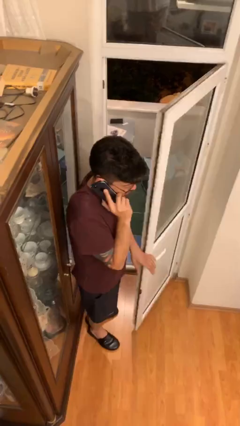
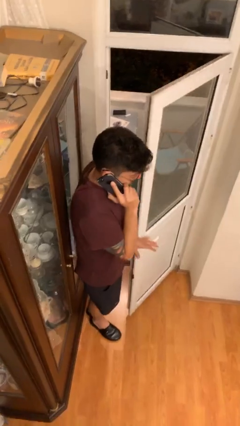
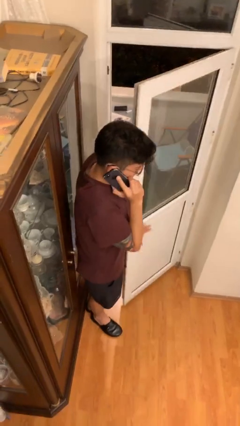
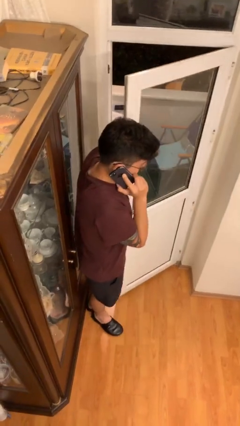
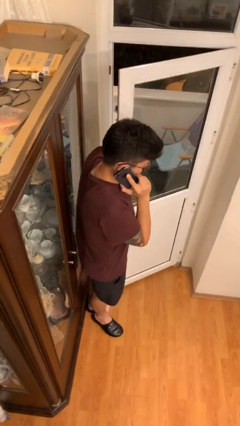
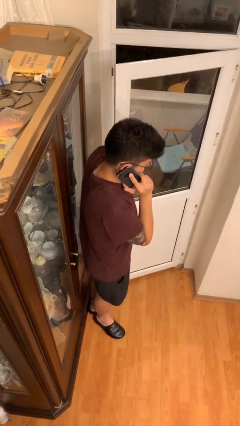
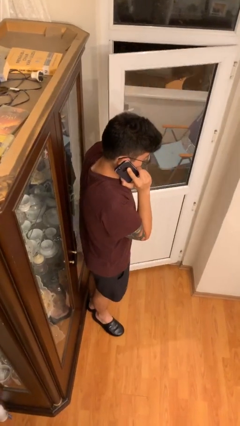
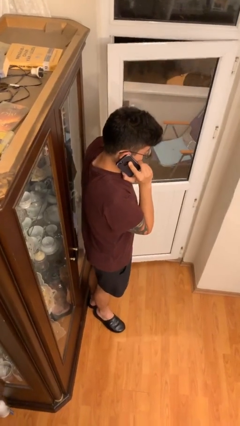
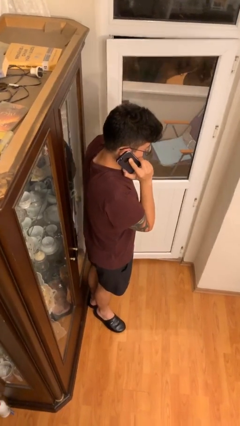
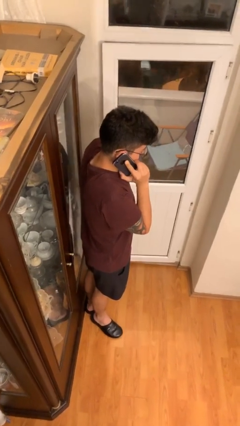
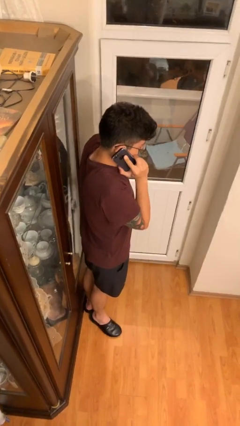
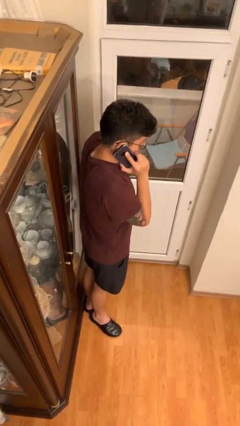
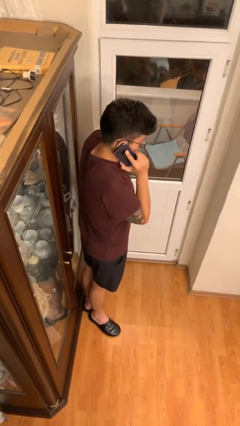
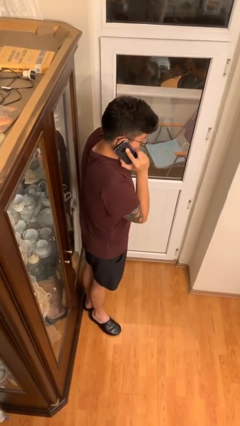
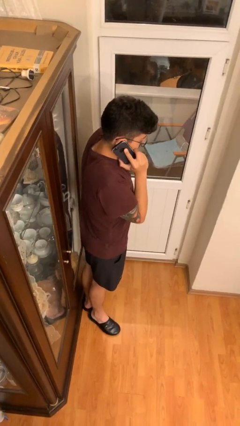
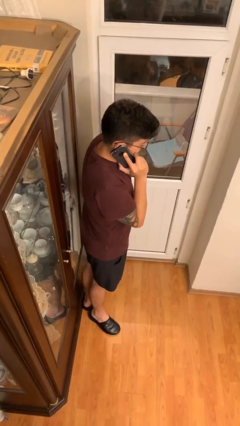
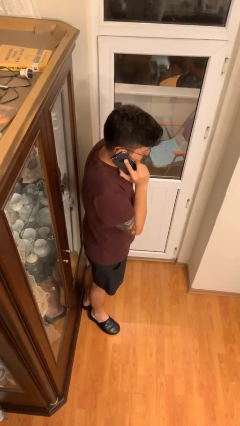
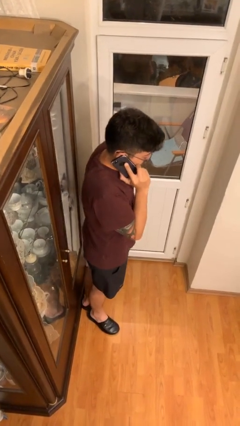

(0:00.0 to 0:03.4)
person closes facility door

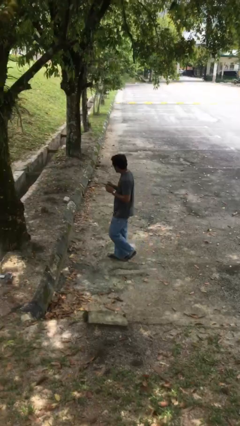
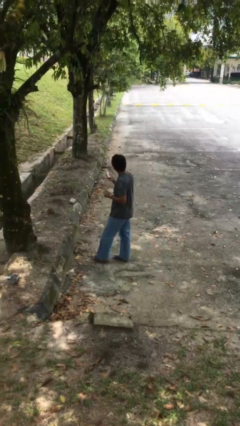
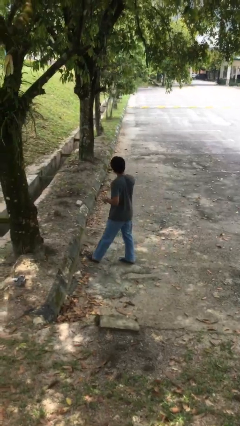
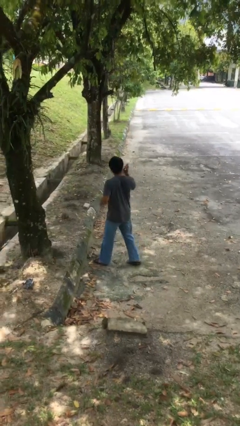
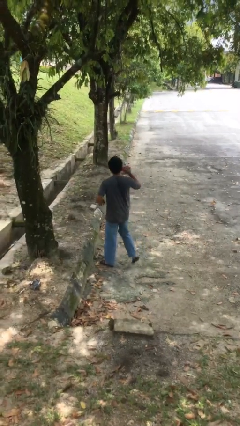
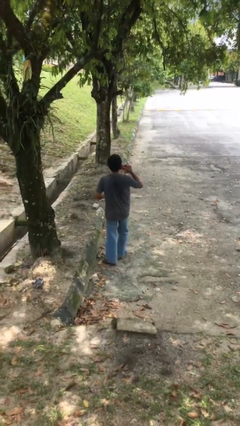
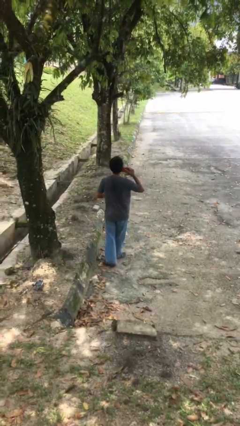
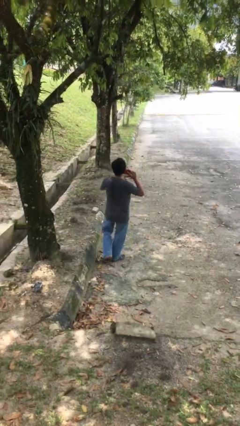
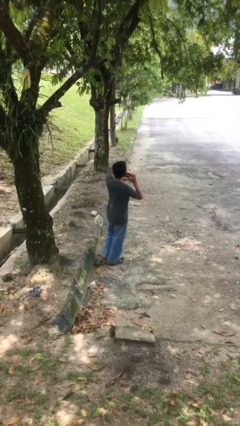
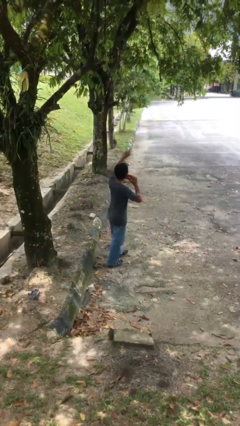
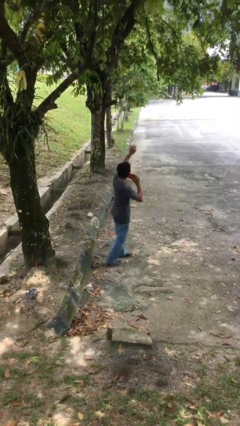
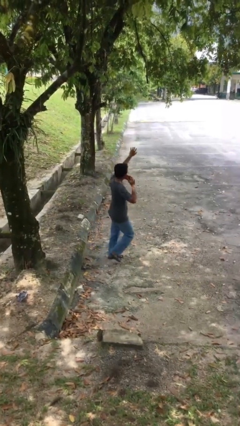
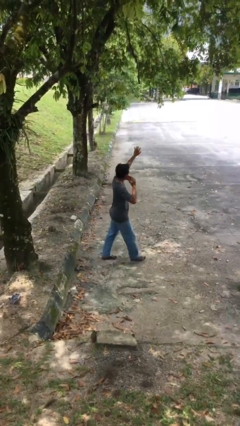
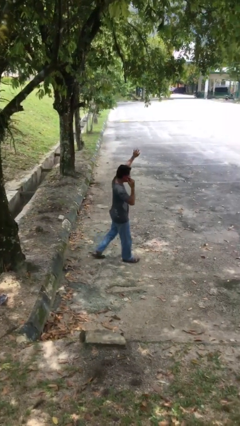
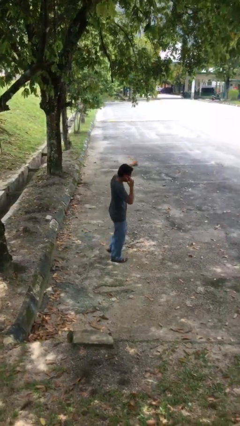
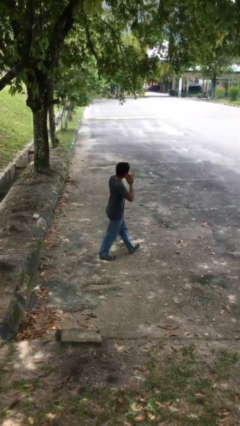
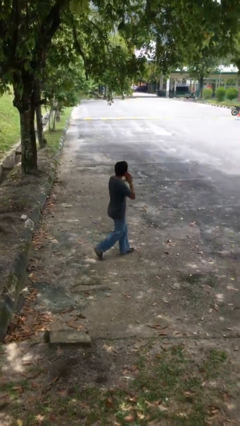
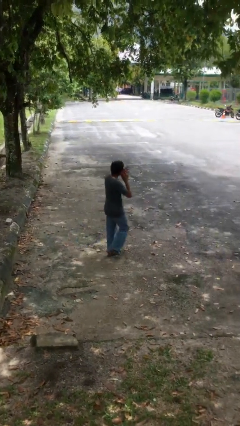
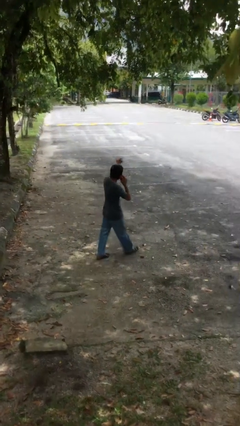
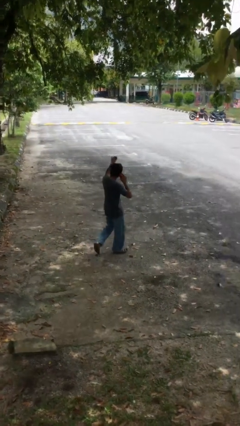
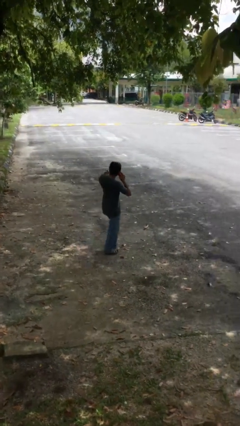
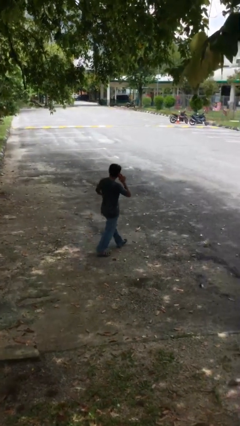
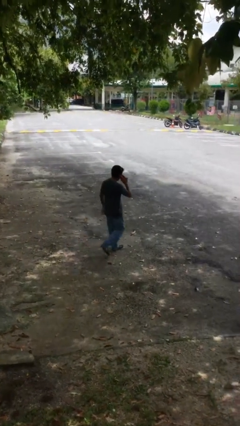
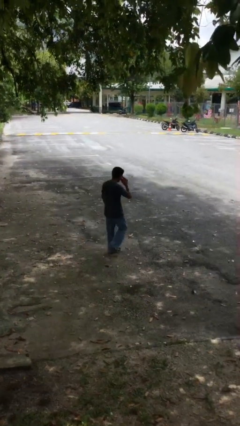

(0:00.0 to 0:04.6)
person talks on phone

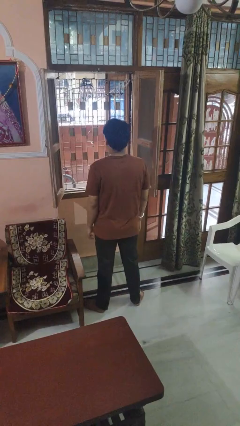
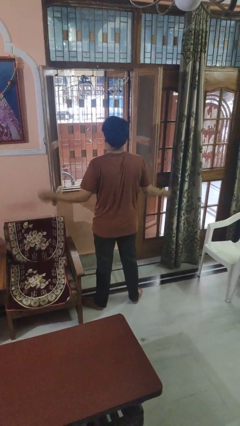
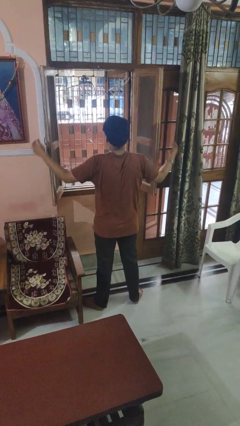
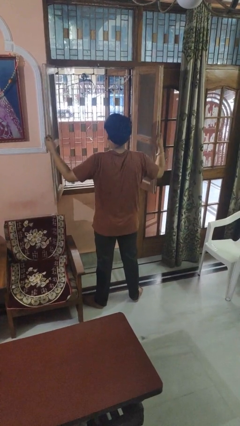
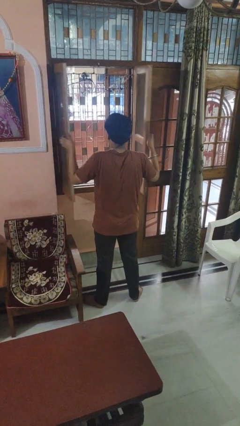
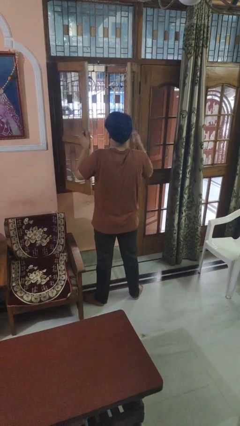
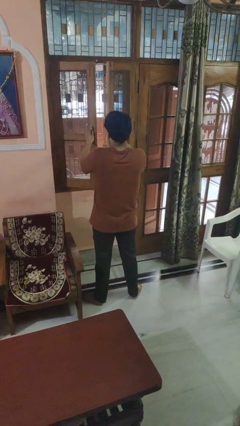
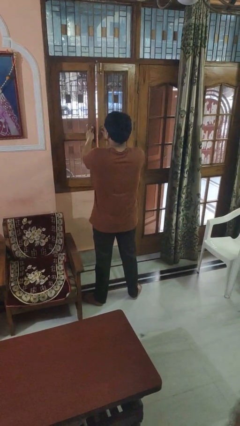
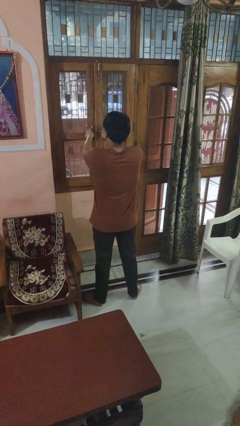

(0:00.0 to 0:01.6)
person closes home window

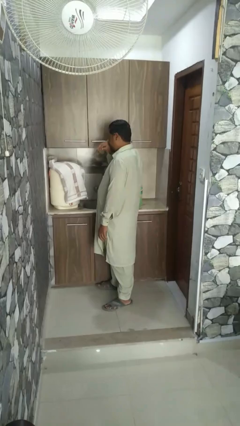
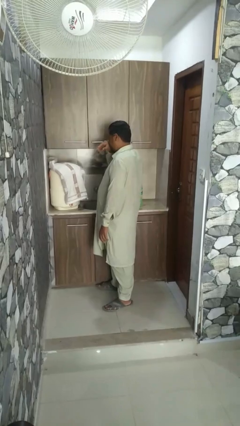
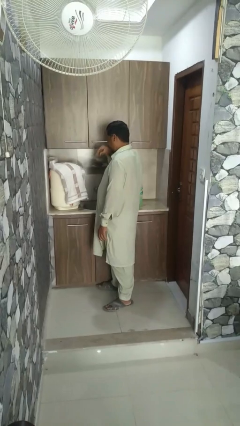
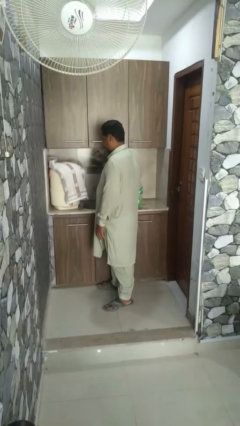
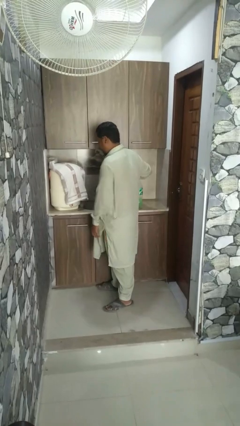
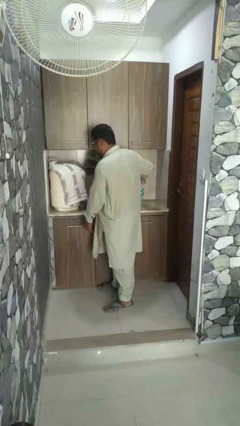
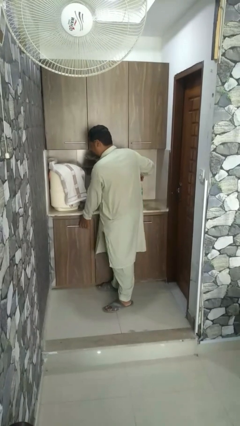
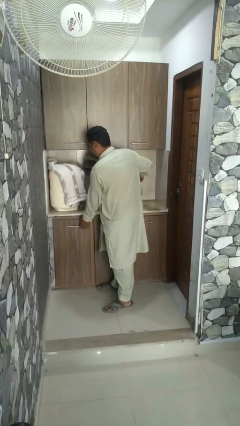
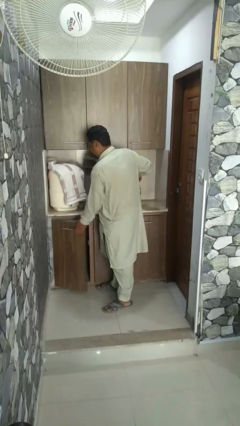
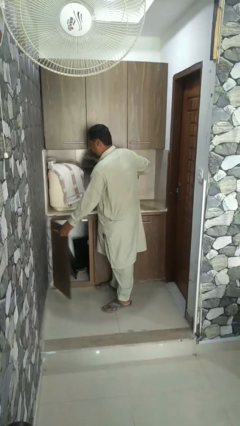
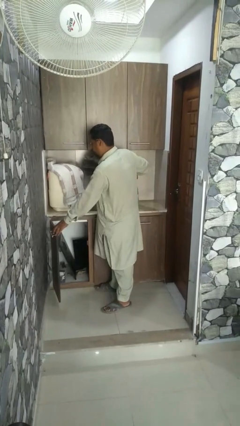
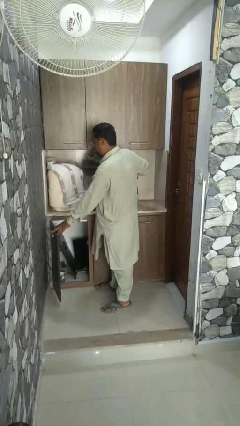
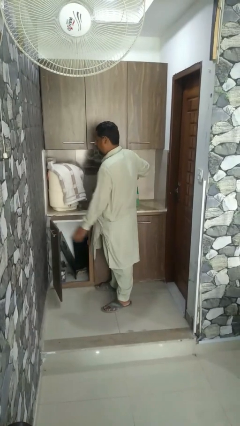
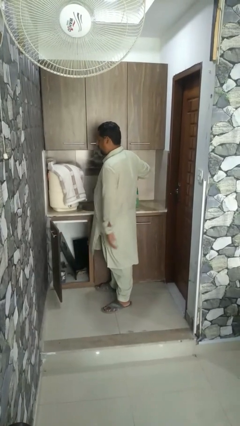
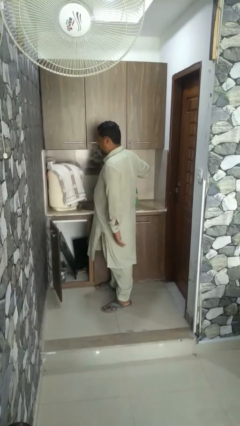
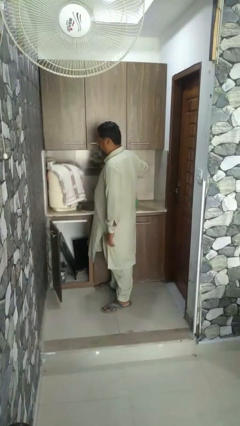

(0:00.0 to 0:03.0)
person opens refrigerator

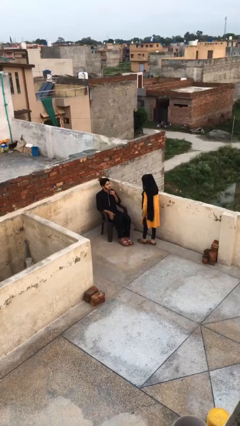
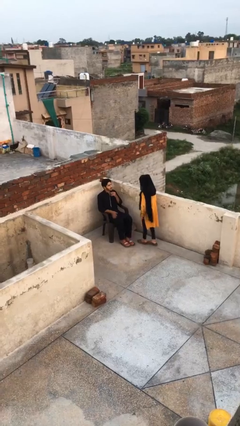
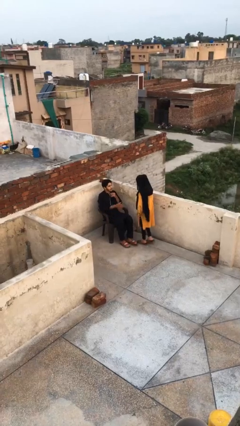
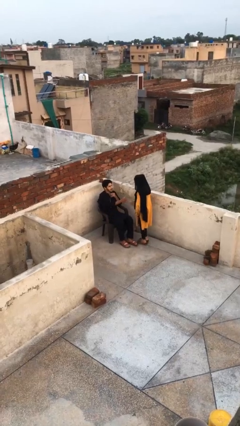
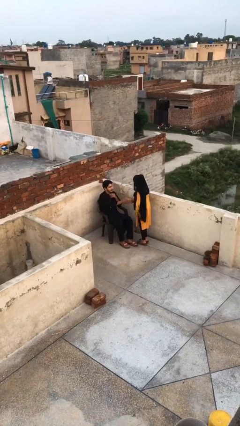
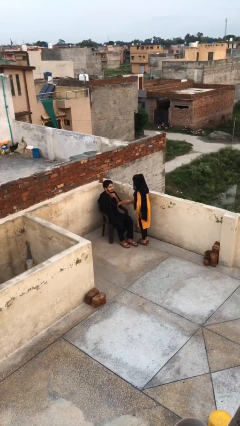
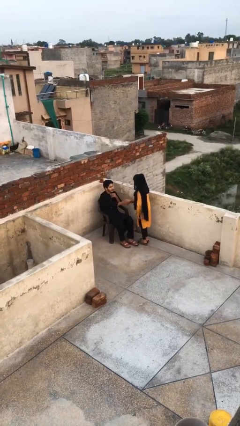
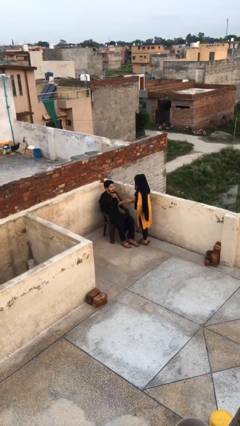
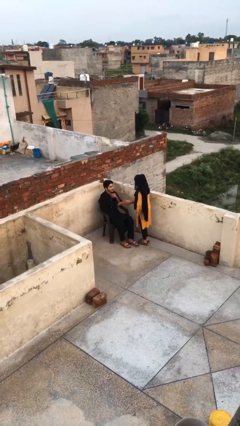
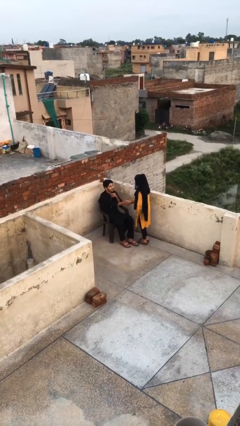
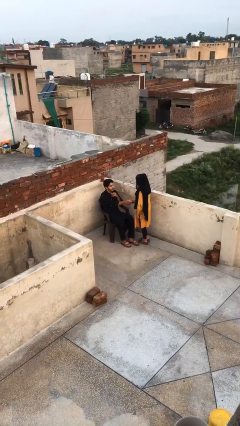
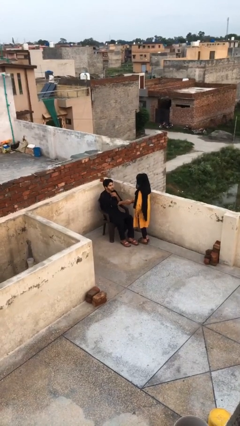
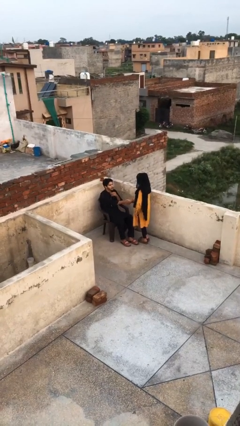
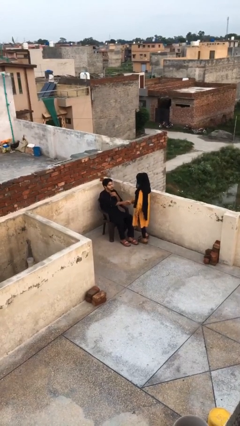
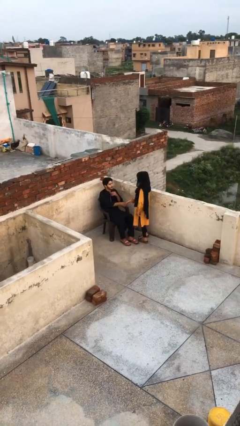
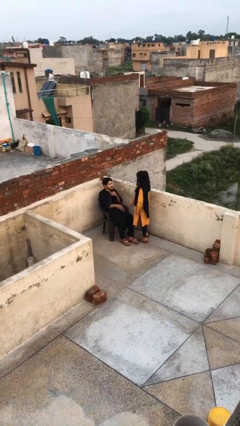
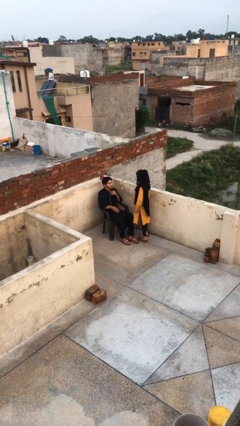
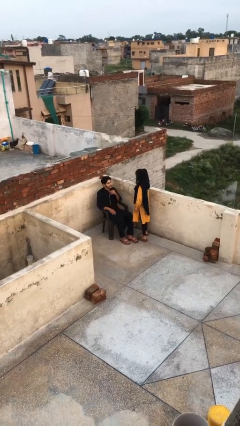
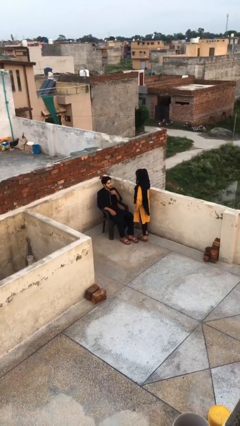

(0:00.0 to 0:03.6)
person shakes hand

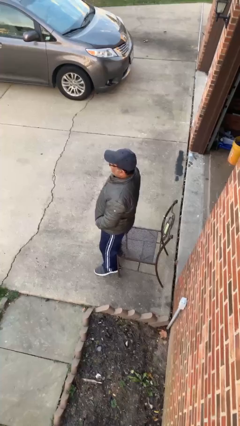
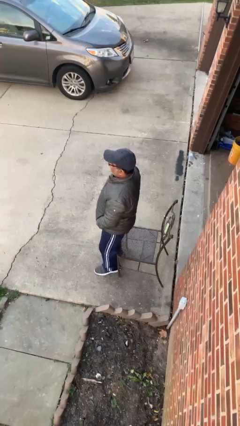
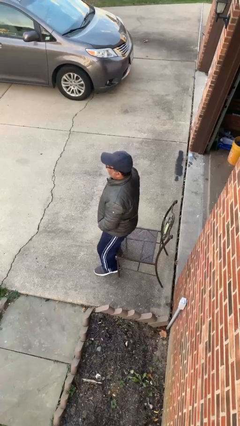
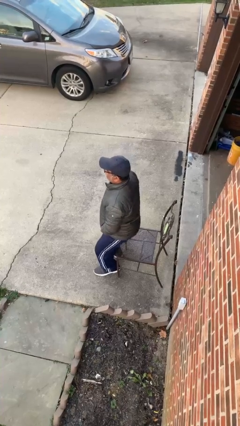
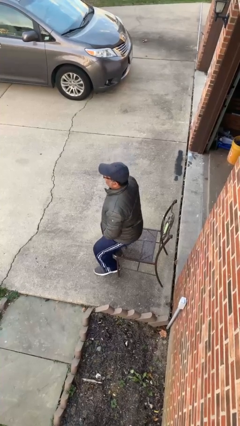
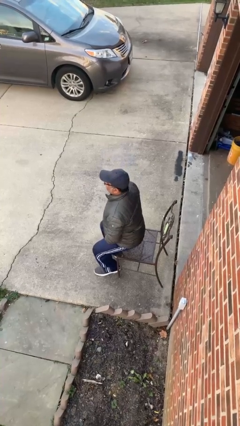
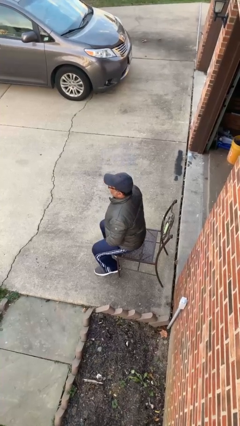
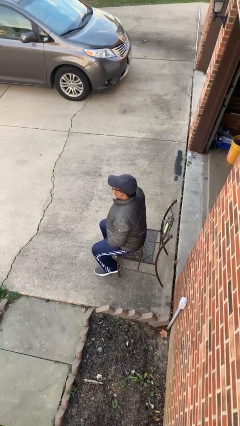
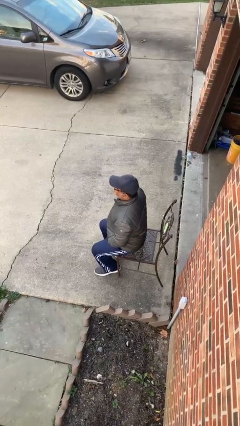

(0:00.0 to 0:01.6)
person sits down
